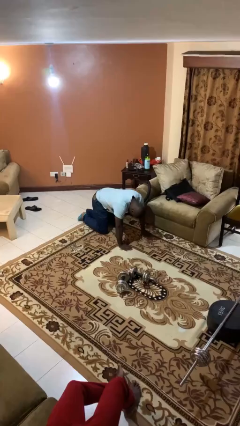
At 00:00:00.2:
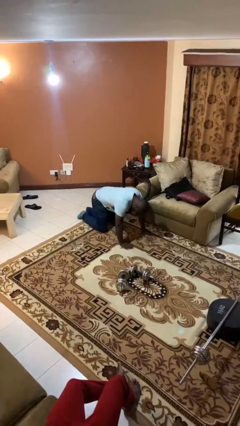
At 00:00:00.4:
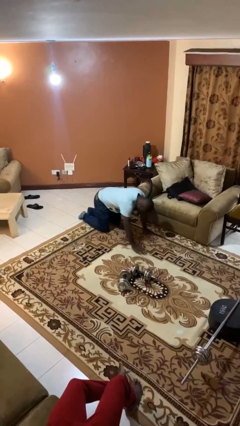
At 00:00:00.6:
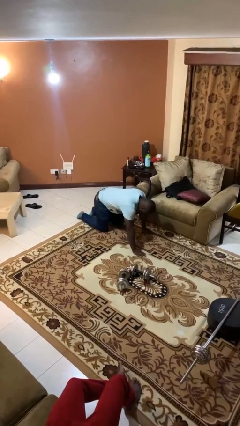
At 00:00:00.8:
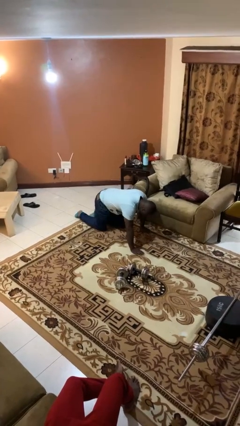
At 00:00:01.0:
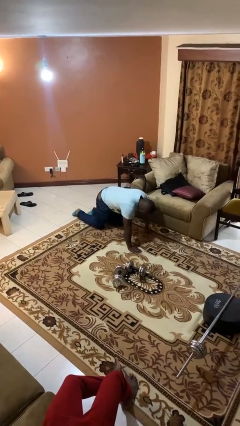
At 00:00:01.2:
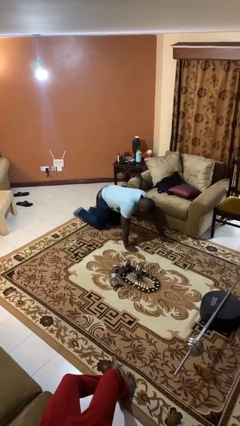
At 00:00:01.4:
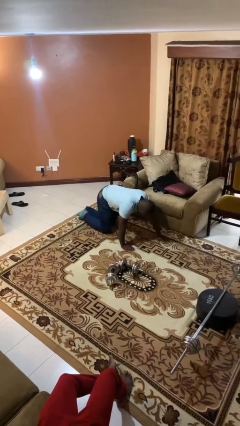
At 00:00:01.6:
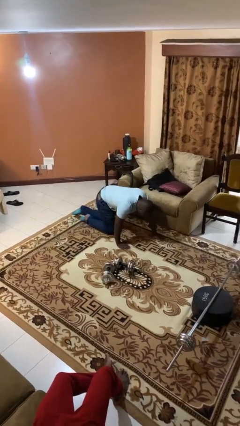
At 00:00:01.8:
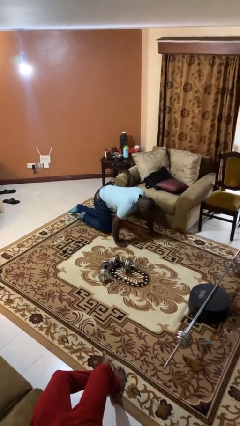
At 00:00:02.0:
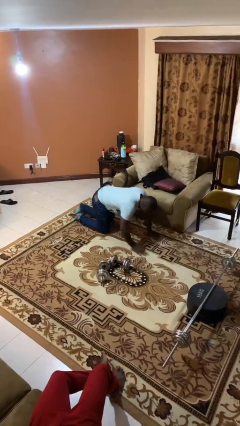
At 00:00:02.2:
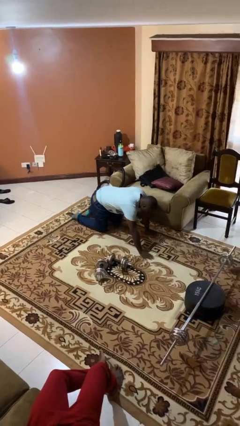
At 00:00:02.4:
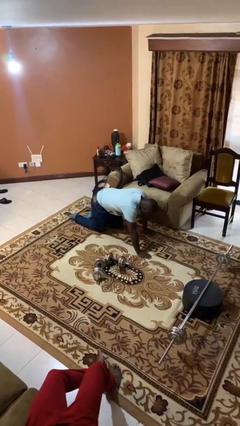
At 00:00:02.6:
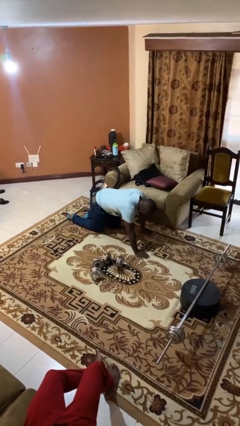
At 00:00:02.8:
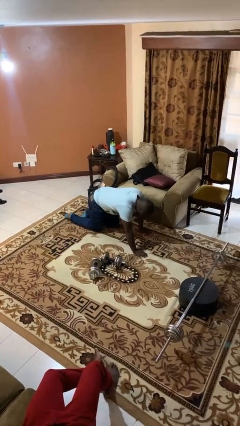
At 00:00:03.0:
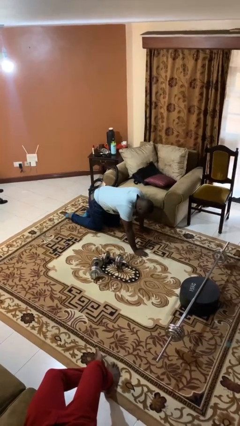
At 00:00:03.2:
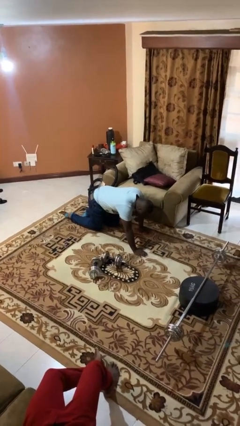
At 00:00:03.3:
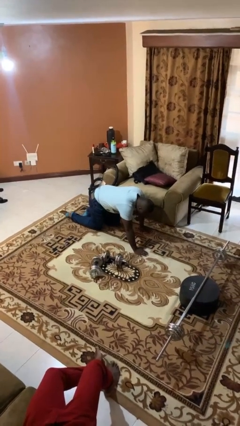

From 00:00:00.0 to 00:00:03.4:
person crawls

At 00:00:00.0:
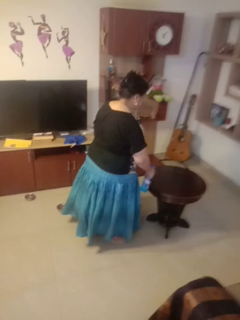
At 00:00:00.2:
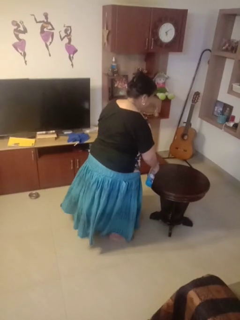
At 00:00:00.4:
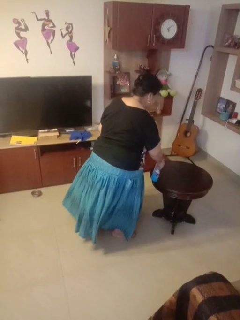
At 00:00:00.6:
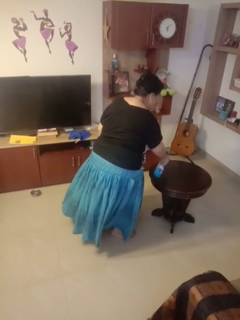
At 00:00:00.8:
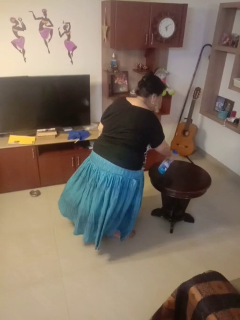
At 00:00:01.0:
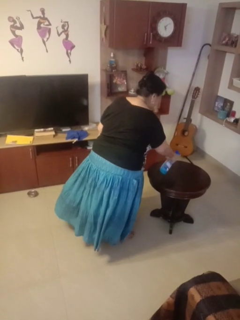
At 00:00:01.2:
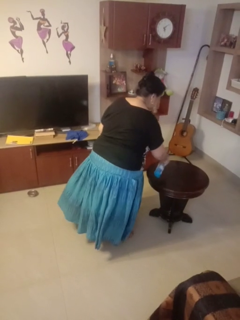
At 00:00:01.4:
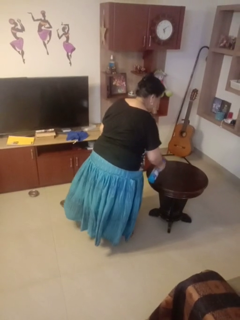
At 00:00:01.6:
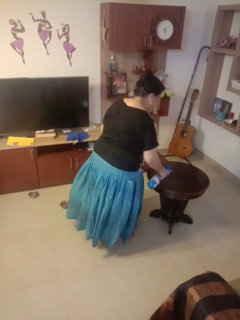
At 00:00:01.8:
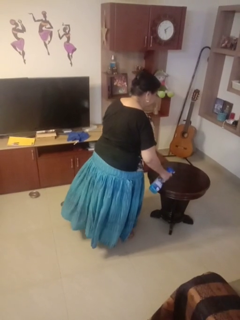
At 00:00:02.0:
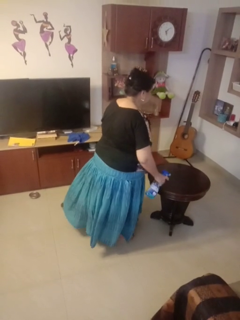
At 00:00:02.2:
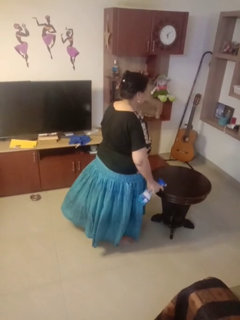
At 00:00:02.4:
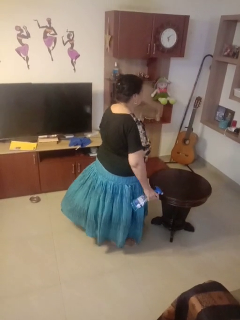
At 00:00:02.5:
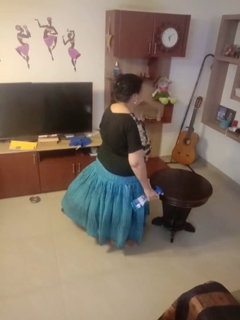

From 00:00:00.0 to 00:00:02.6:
person sprays from bottle

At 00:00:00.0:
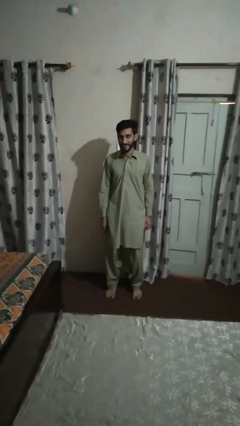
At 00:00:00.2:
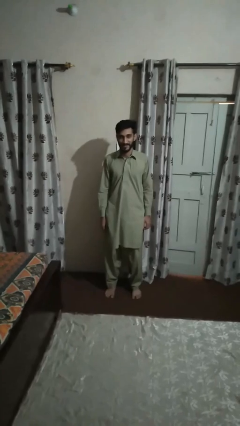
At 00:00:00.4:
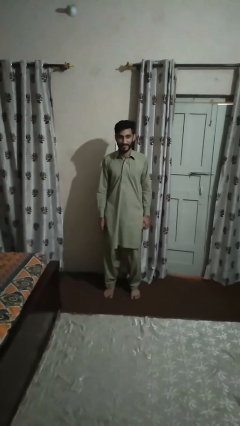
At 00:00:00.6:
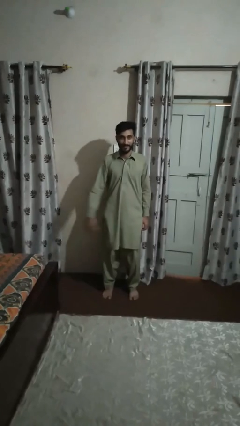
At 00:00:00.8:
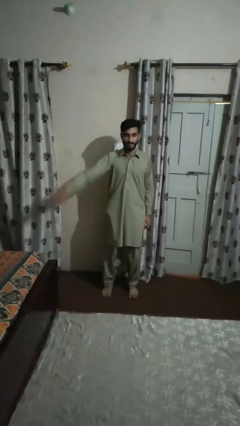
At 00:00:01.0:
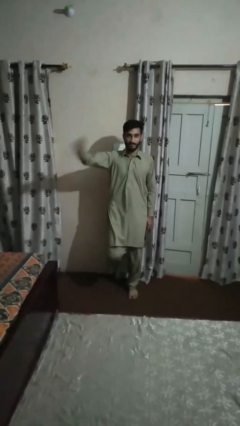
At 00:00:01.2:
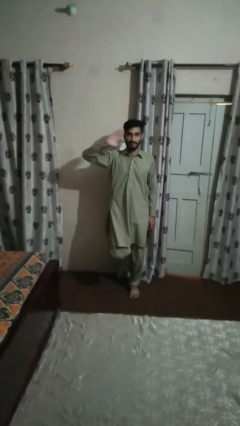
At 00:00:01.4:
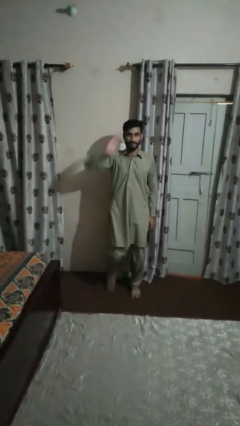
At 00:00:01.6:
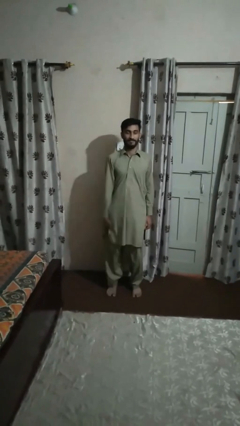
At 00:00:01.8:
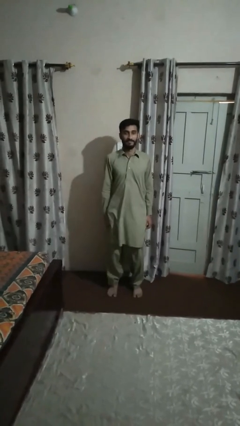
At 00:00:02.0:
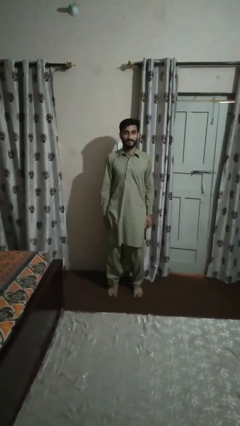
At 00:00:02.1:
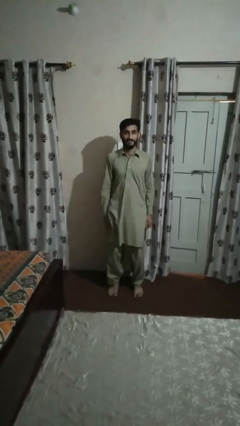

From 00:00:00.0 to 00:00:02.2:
person salutes

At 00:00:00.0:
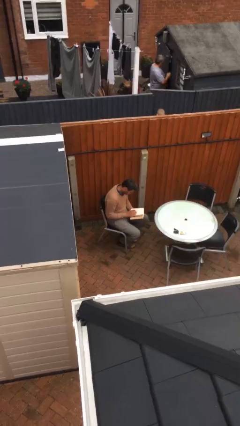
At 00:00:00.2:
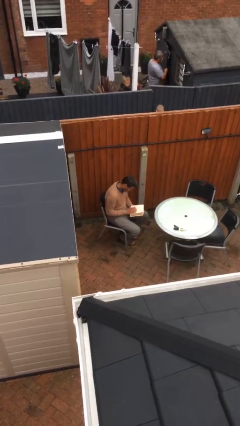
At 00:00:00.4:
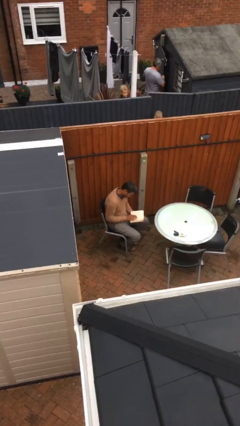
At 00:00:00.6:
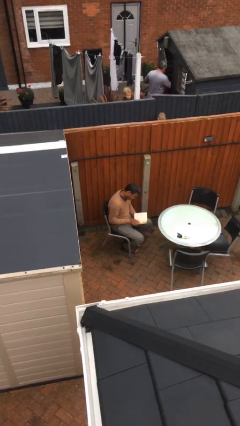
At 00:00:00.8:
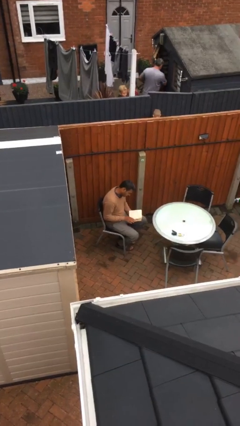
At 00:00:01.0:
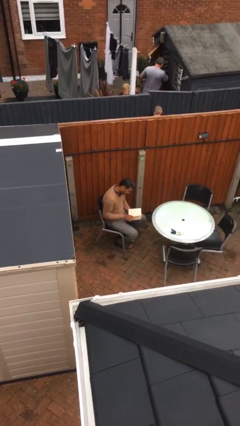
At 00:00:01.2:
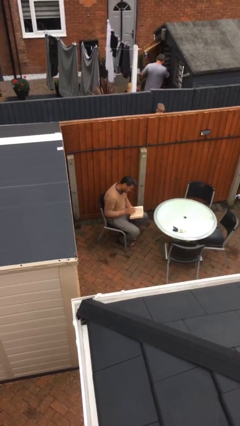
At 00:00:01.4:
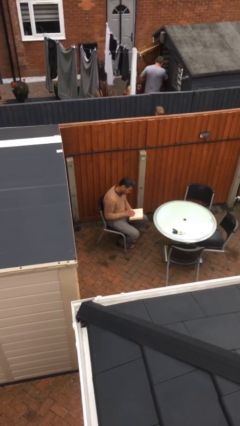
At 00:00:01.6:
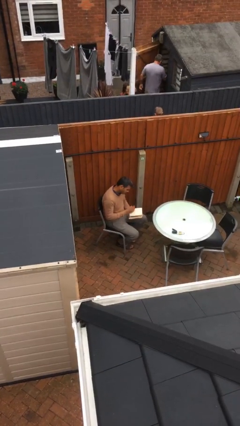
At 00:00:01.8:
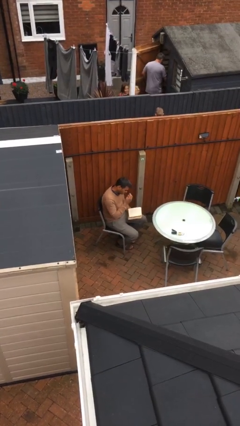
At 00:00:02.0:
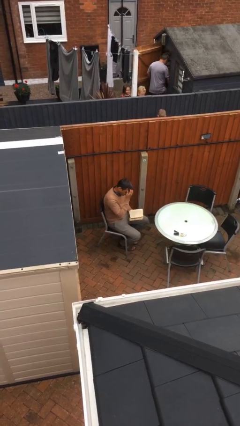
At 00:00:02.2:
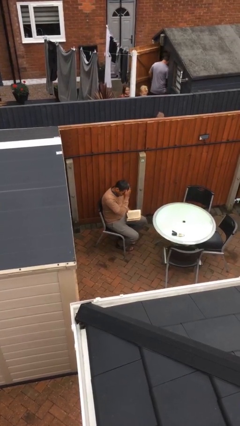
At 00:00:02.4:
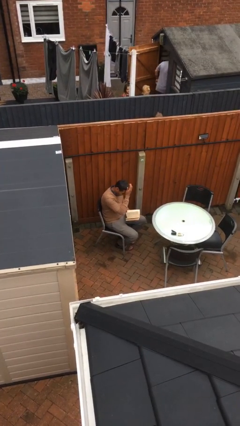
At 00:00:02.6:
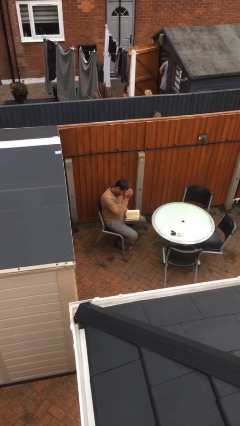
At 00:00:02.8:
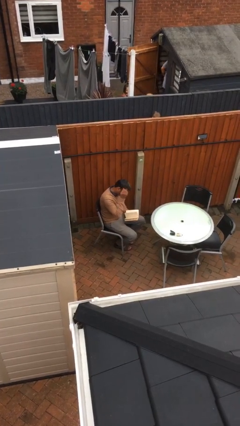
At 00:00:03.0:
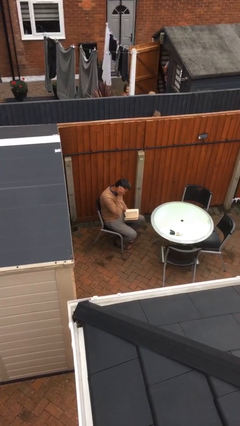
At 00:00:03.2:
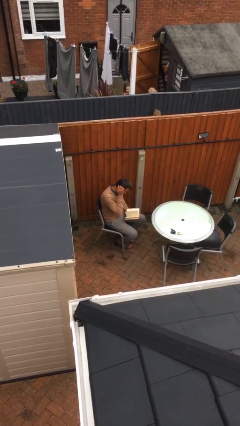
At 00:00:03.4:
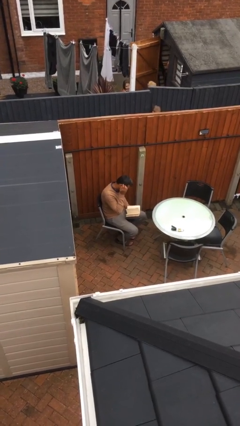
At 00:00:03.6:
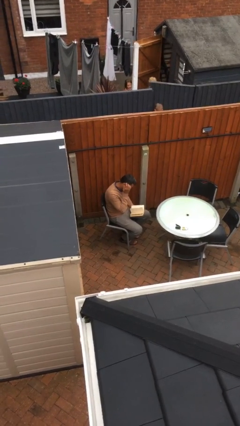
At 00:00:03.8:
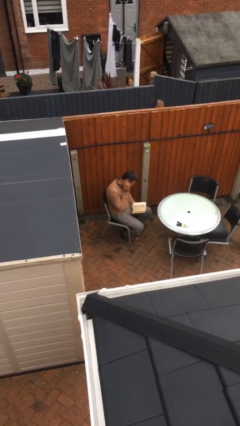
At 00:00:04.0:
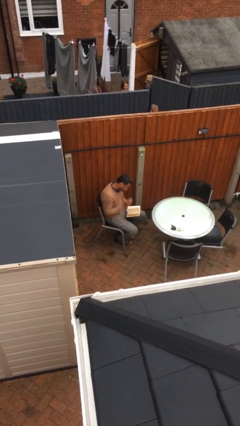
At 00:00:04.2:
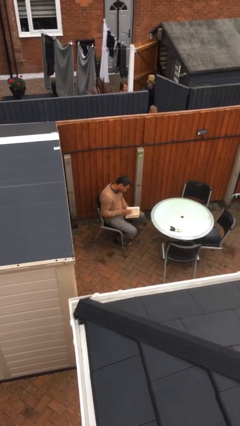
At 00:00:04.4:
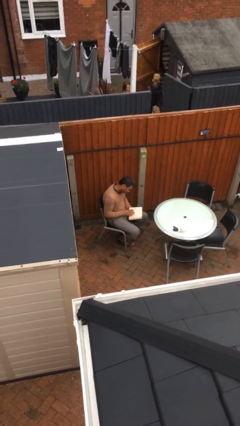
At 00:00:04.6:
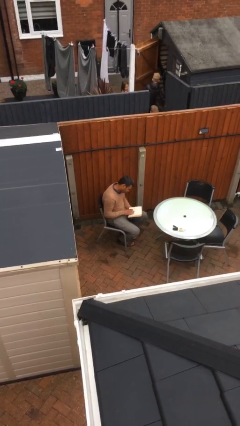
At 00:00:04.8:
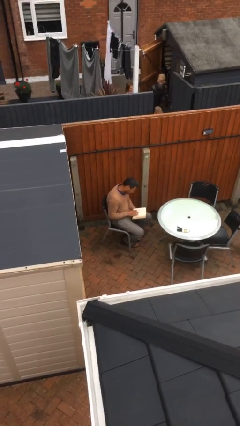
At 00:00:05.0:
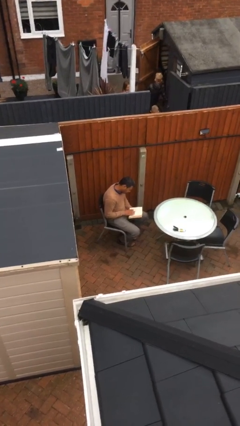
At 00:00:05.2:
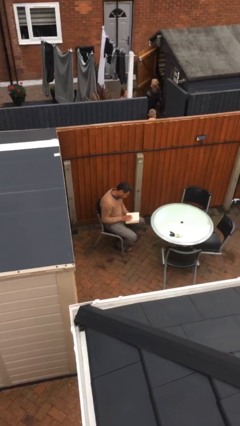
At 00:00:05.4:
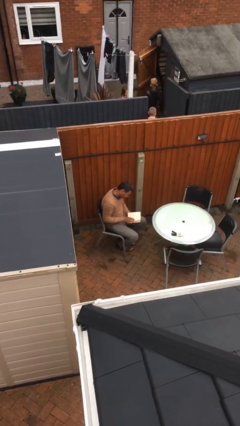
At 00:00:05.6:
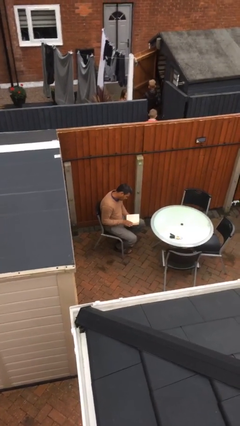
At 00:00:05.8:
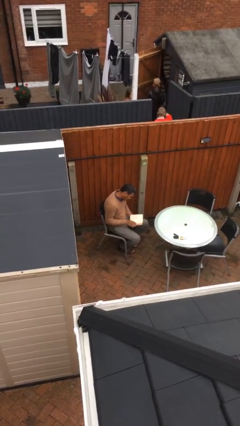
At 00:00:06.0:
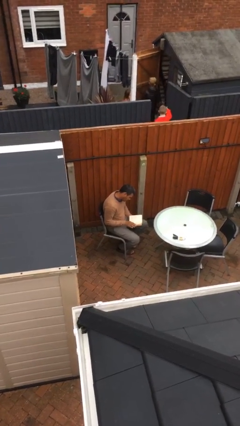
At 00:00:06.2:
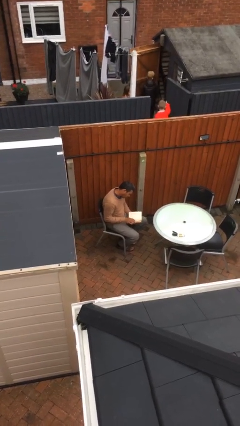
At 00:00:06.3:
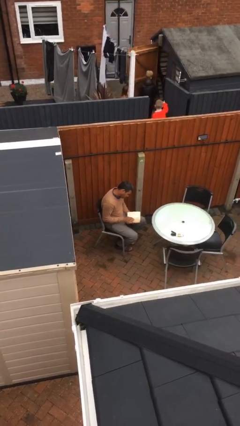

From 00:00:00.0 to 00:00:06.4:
person reads document

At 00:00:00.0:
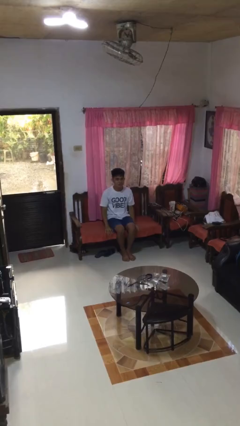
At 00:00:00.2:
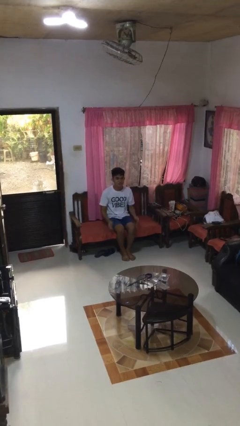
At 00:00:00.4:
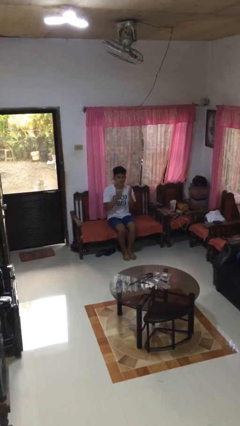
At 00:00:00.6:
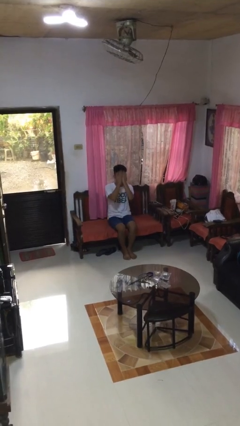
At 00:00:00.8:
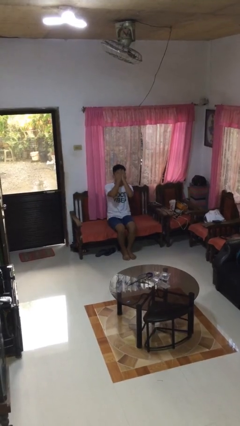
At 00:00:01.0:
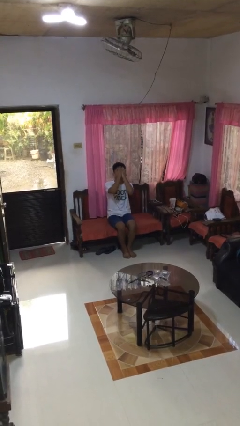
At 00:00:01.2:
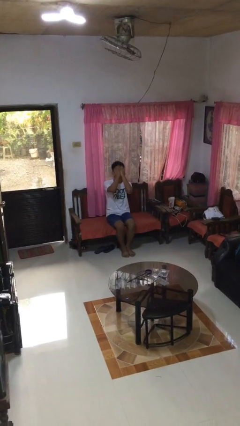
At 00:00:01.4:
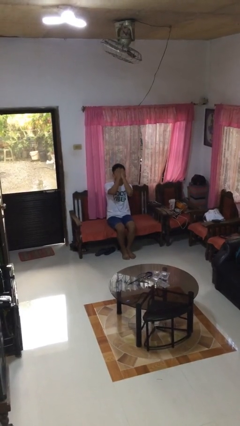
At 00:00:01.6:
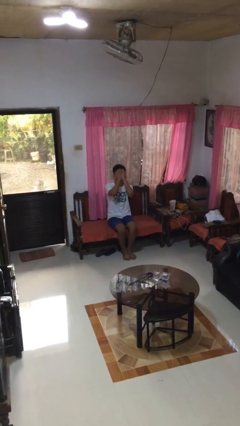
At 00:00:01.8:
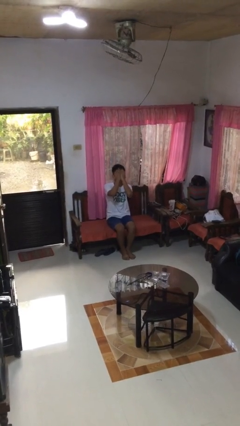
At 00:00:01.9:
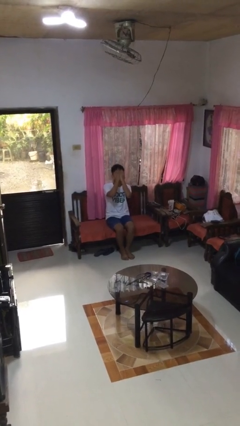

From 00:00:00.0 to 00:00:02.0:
person covers face with hands

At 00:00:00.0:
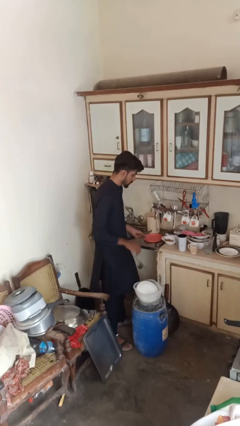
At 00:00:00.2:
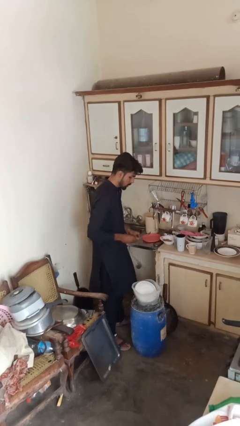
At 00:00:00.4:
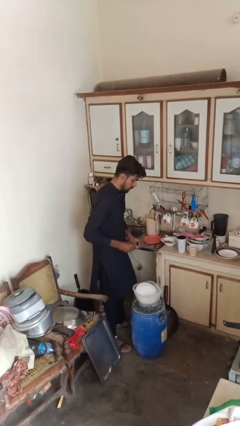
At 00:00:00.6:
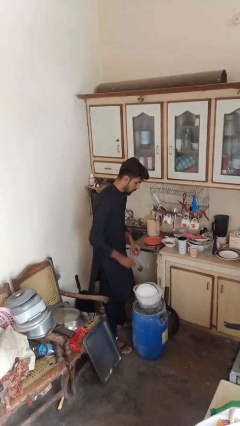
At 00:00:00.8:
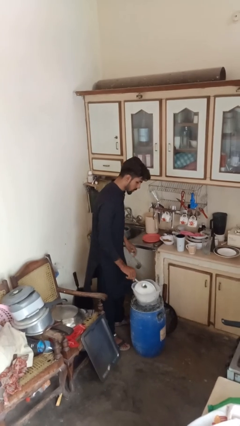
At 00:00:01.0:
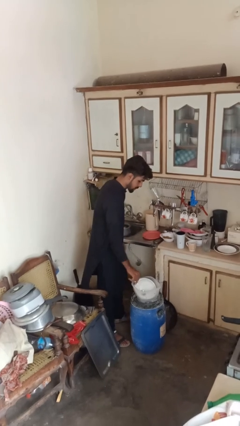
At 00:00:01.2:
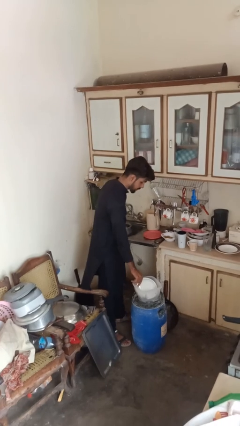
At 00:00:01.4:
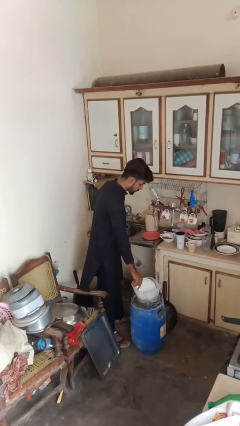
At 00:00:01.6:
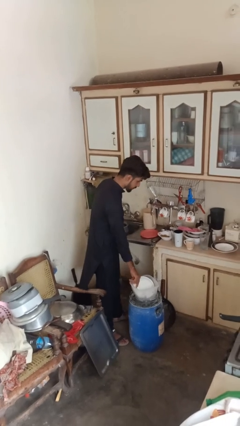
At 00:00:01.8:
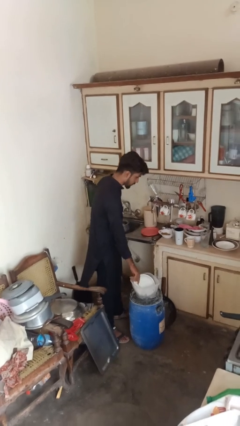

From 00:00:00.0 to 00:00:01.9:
person loads dishwasher
